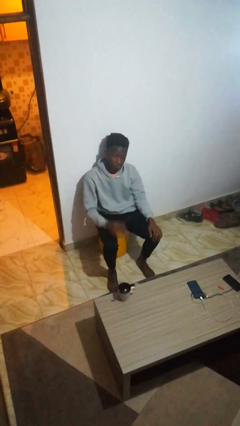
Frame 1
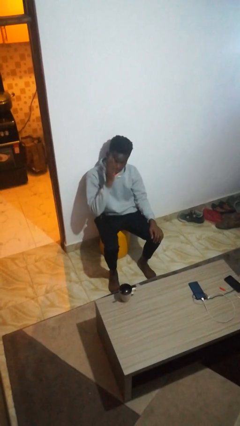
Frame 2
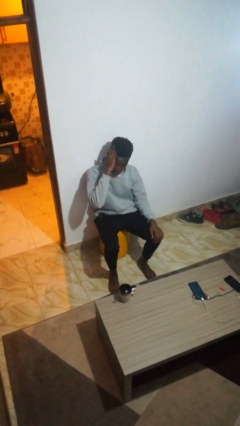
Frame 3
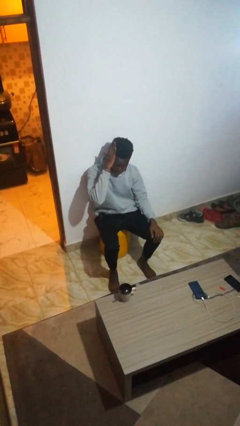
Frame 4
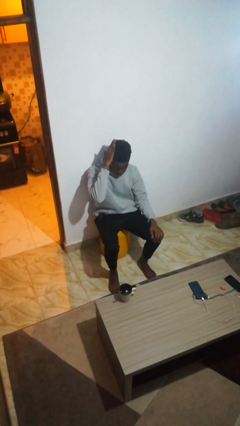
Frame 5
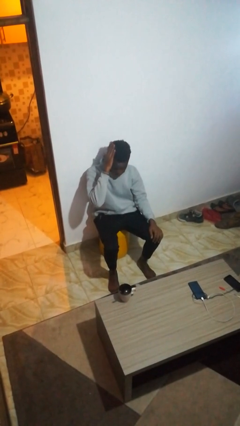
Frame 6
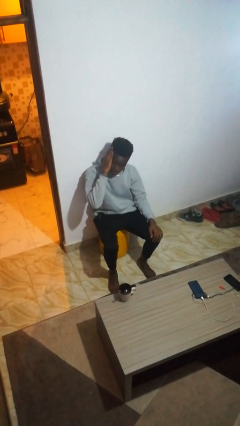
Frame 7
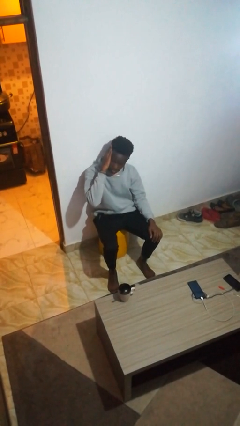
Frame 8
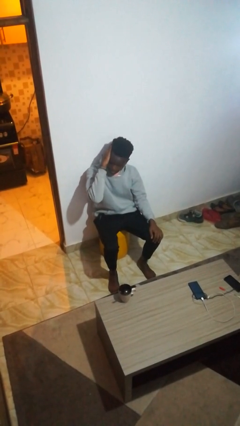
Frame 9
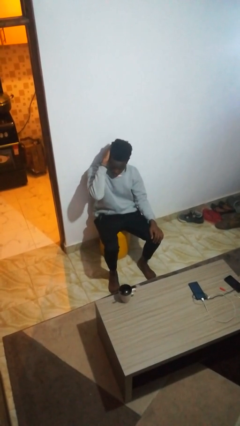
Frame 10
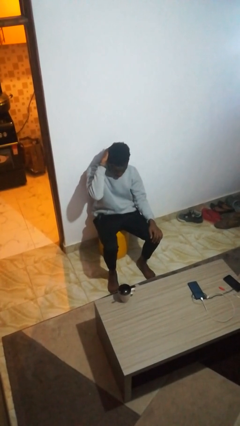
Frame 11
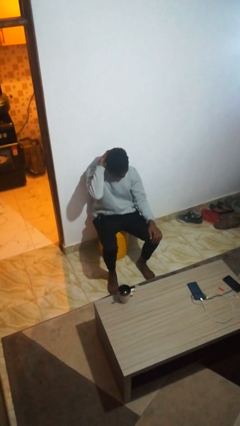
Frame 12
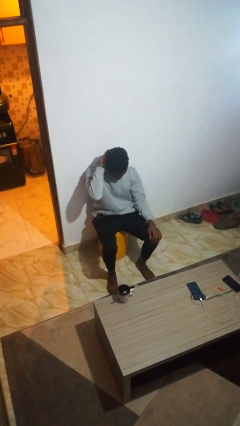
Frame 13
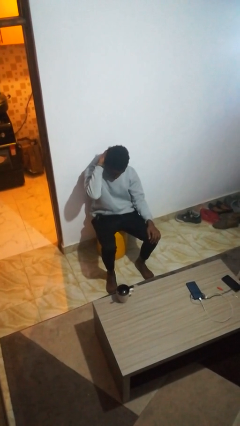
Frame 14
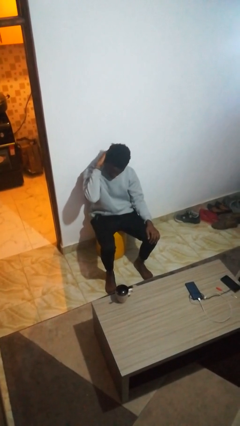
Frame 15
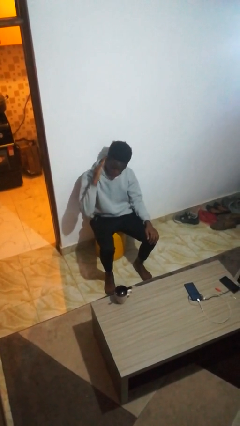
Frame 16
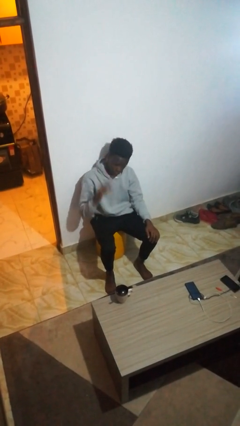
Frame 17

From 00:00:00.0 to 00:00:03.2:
person strokes hair

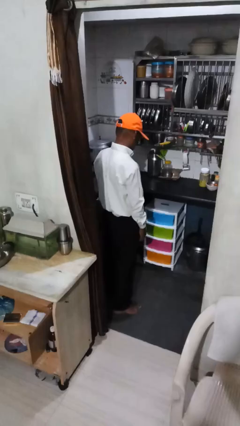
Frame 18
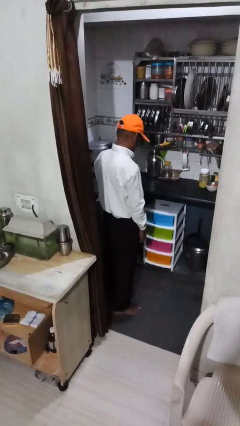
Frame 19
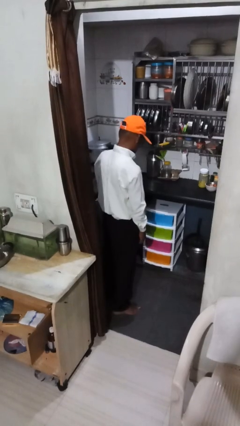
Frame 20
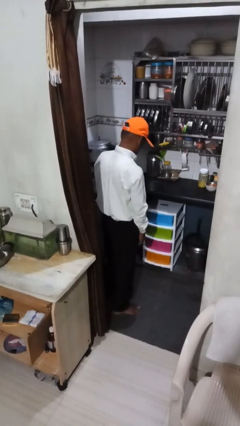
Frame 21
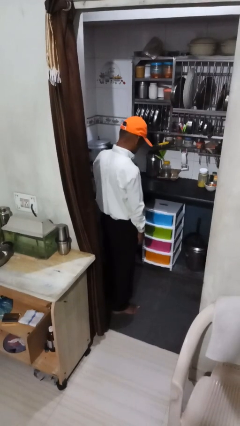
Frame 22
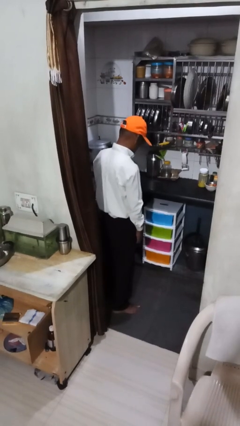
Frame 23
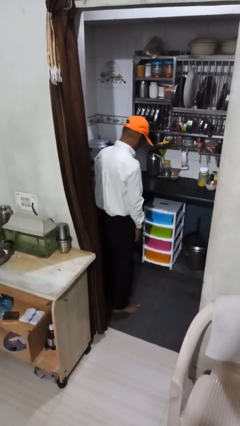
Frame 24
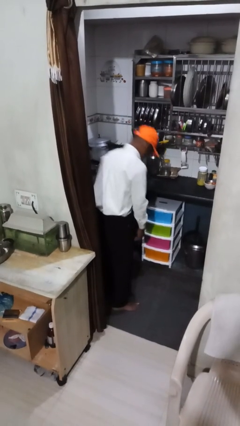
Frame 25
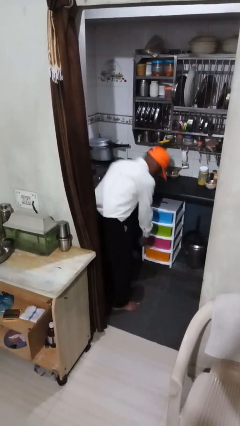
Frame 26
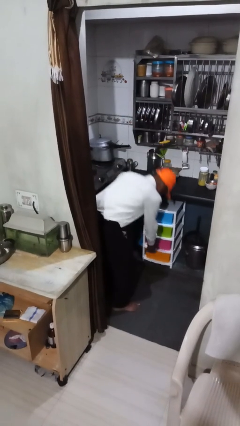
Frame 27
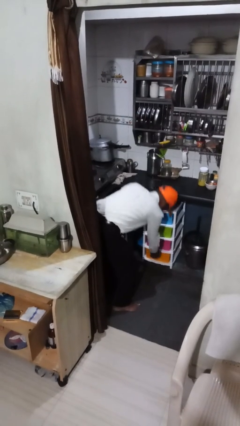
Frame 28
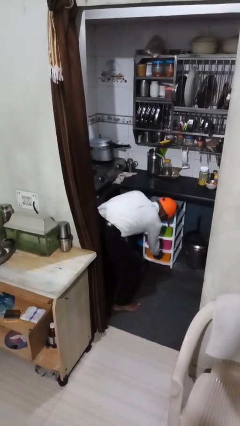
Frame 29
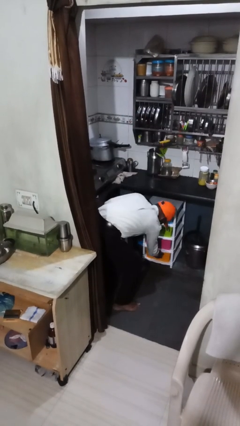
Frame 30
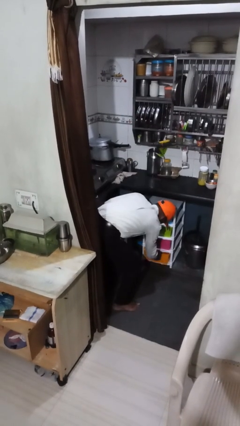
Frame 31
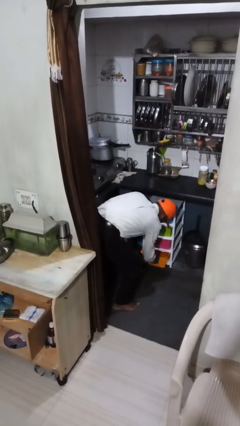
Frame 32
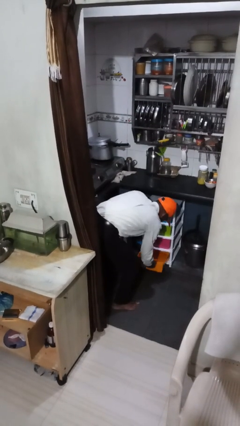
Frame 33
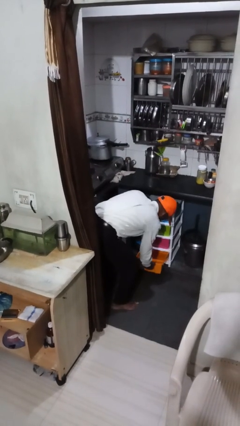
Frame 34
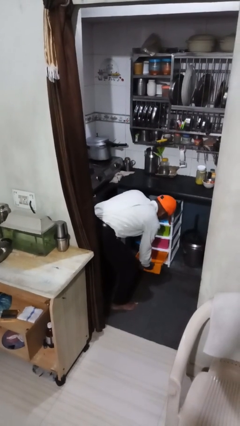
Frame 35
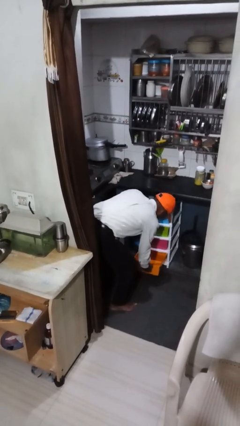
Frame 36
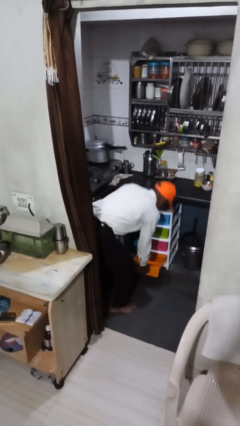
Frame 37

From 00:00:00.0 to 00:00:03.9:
person opens kitchen drawer

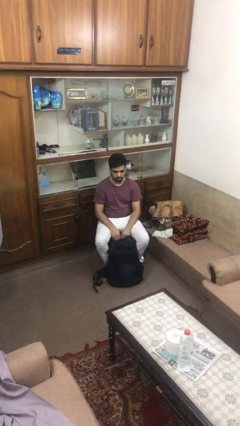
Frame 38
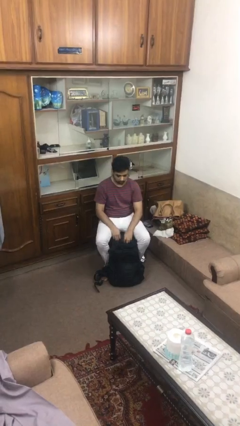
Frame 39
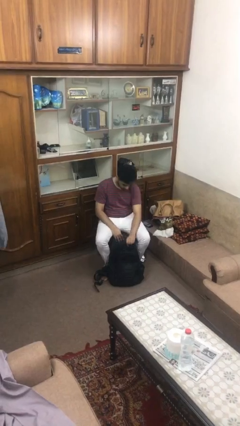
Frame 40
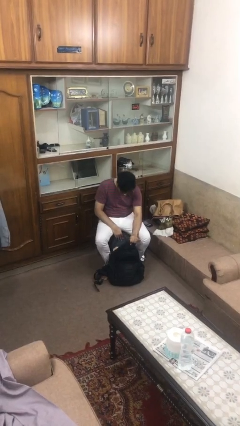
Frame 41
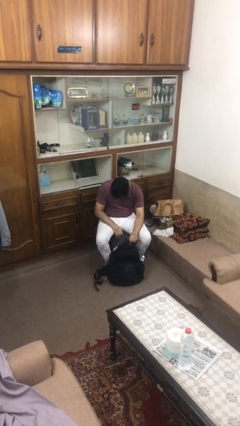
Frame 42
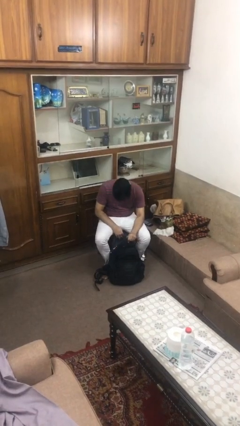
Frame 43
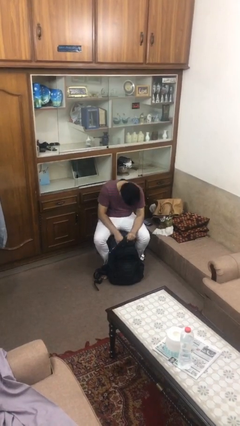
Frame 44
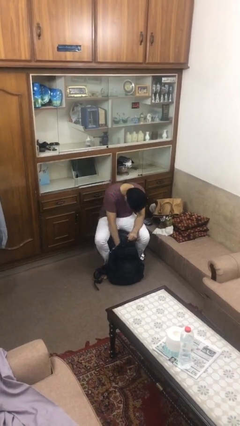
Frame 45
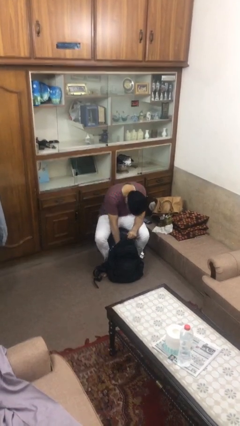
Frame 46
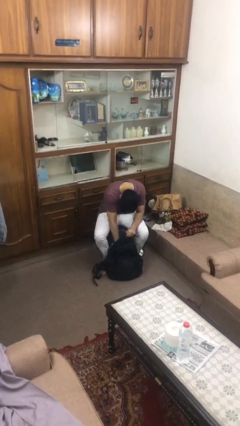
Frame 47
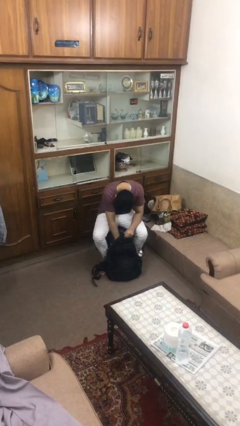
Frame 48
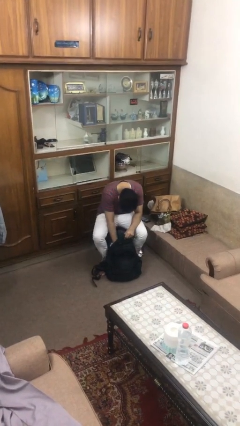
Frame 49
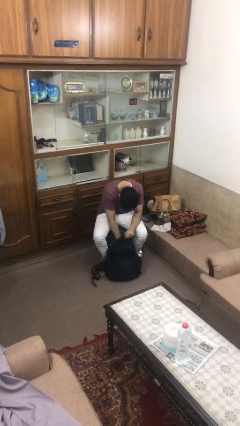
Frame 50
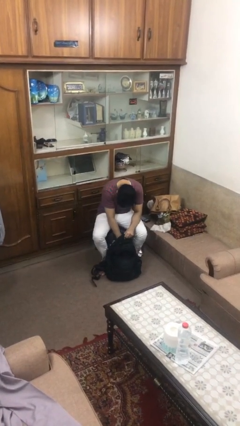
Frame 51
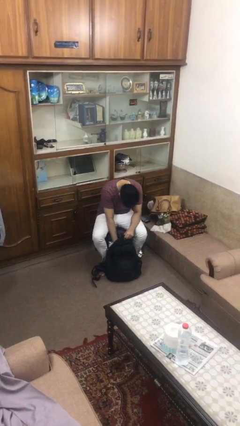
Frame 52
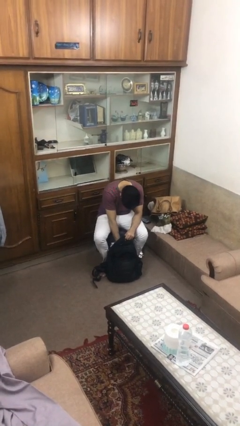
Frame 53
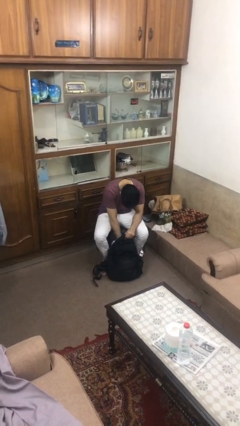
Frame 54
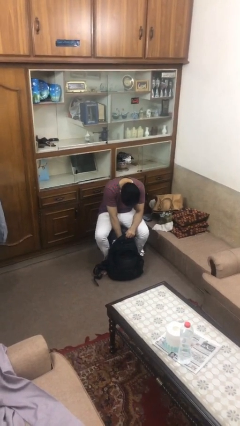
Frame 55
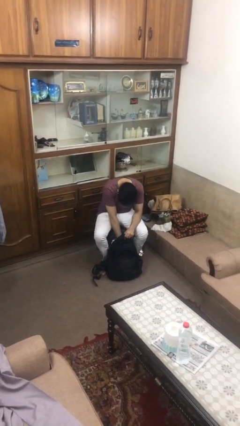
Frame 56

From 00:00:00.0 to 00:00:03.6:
person searches in backpack

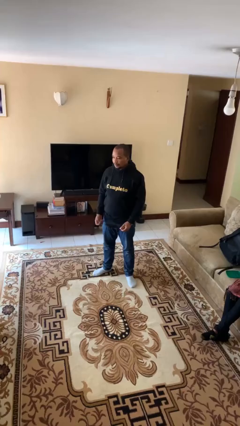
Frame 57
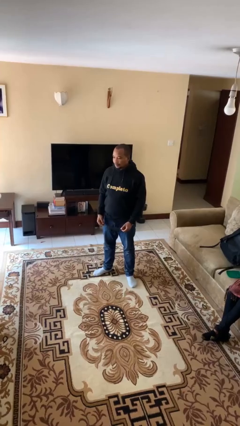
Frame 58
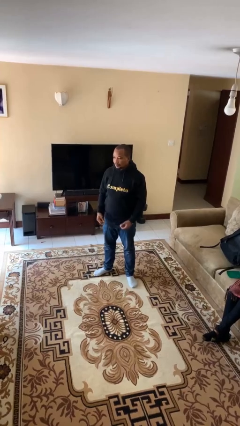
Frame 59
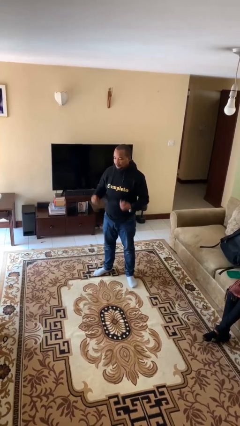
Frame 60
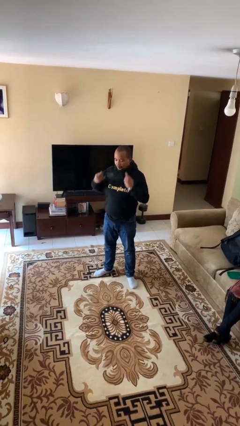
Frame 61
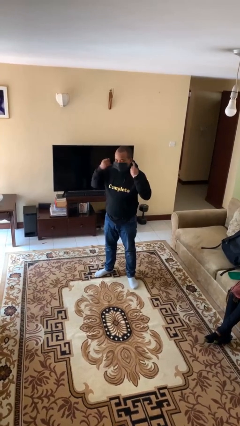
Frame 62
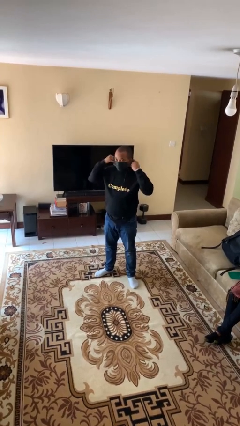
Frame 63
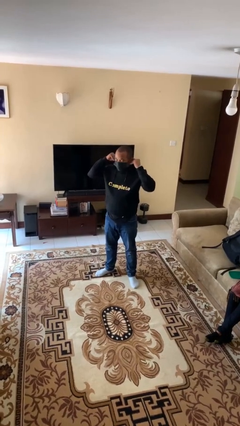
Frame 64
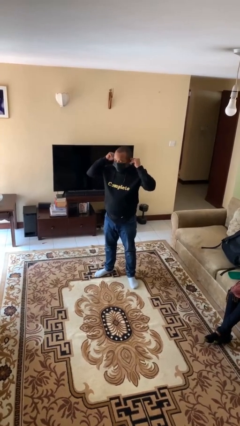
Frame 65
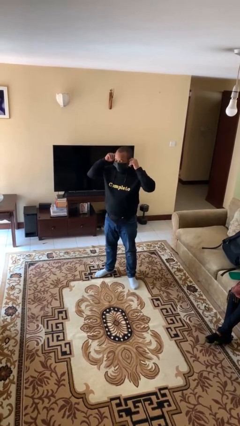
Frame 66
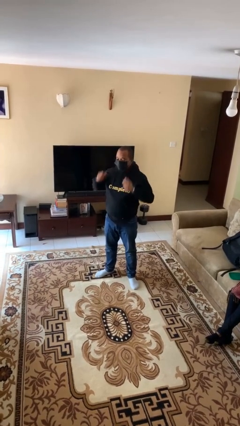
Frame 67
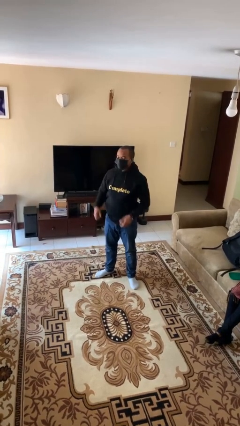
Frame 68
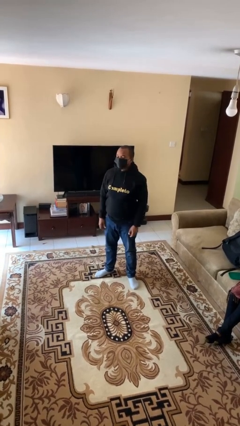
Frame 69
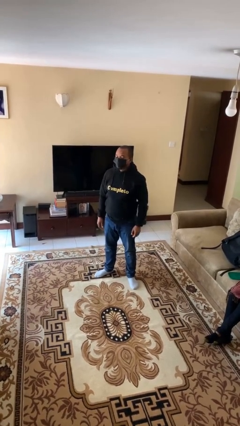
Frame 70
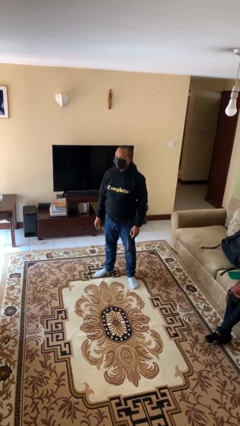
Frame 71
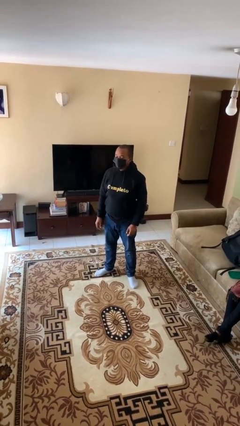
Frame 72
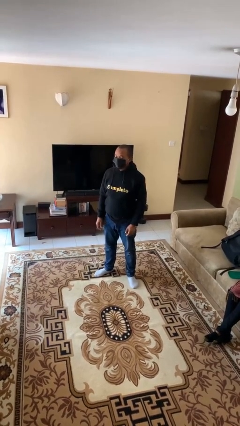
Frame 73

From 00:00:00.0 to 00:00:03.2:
person puts on facemask

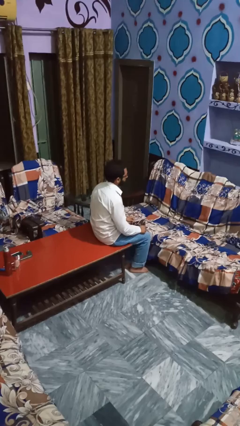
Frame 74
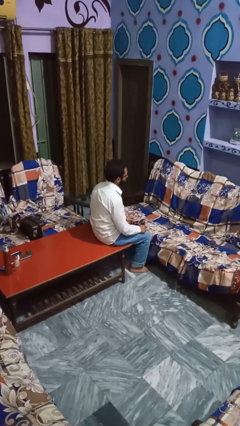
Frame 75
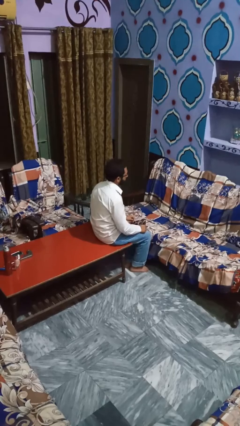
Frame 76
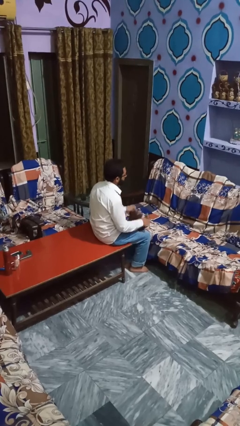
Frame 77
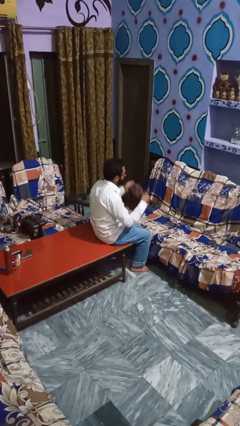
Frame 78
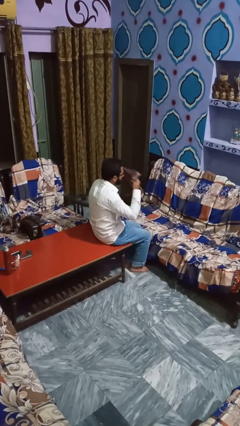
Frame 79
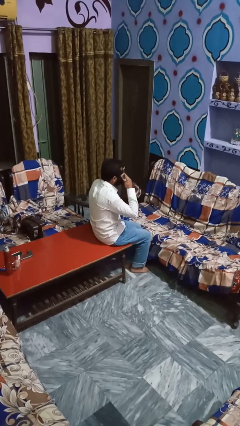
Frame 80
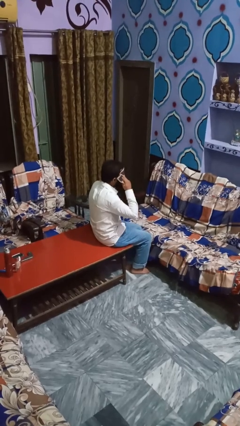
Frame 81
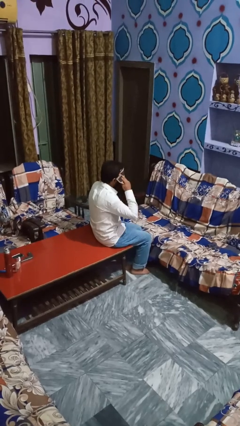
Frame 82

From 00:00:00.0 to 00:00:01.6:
person yawns

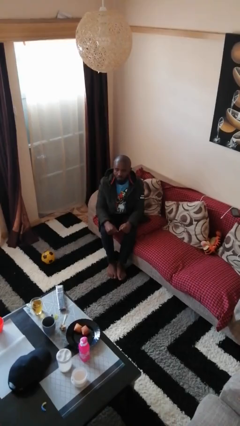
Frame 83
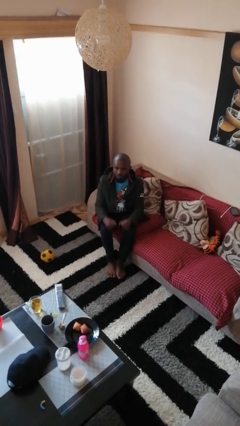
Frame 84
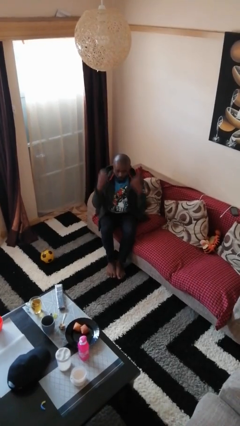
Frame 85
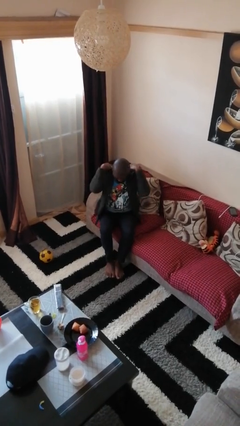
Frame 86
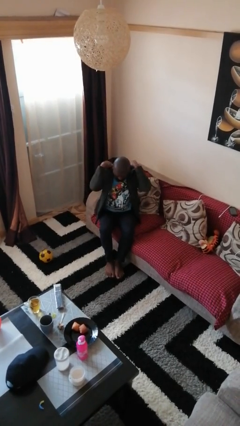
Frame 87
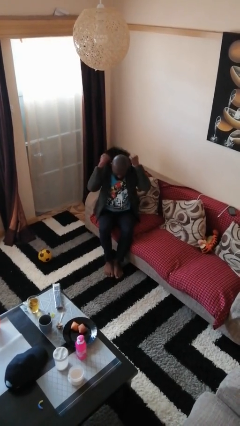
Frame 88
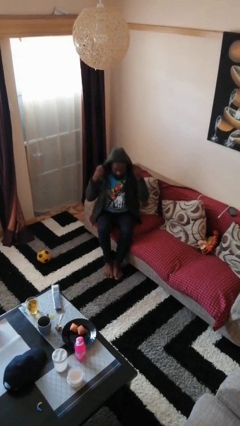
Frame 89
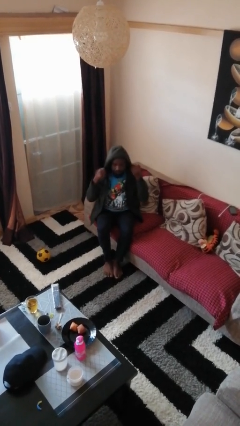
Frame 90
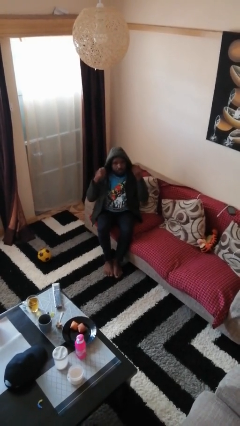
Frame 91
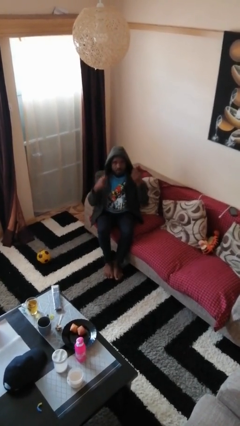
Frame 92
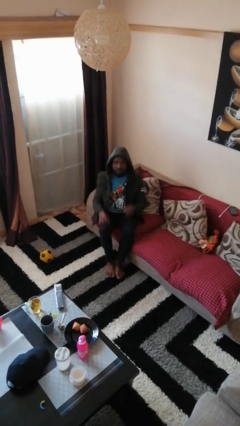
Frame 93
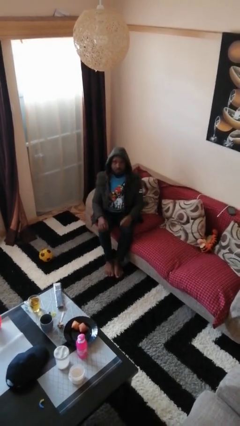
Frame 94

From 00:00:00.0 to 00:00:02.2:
person puts on hoodie
